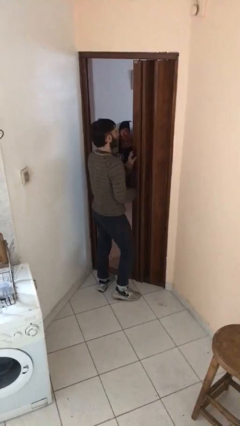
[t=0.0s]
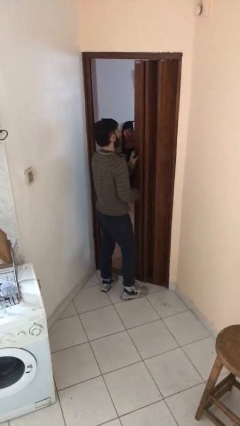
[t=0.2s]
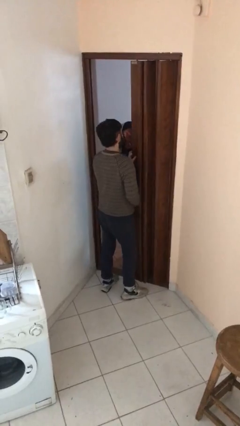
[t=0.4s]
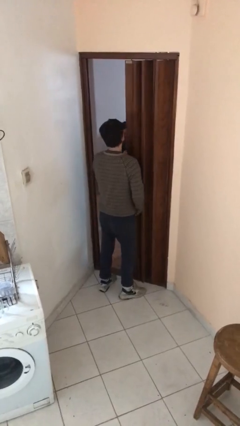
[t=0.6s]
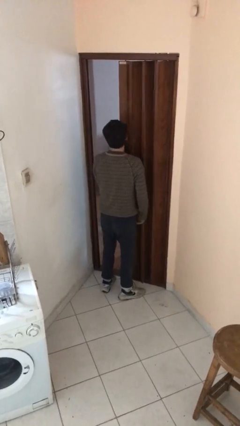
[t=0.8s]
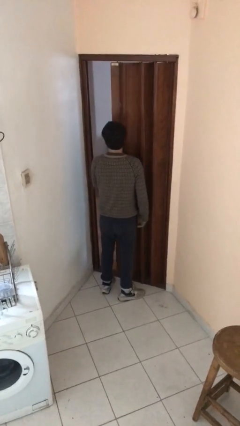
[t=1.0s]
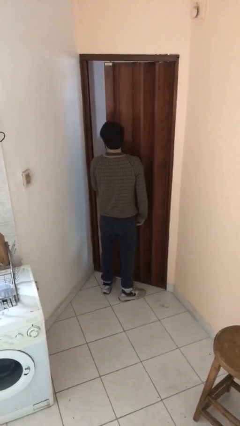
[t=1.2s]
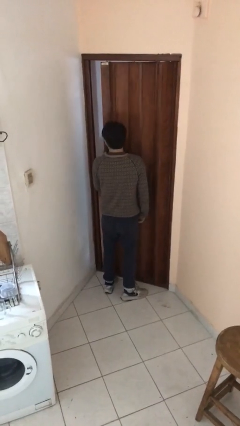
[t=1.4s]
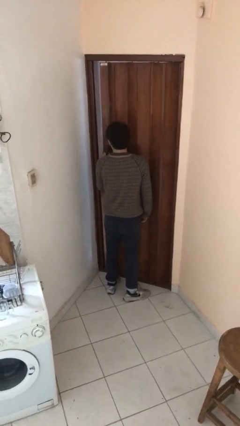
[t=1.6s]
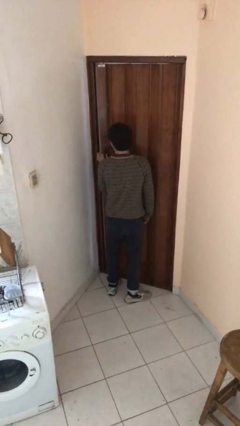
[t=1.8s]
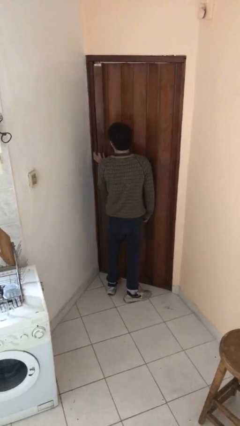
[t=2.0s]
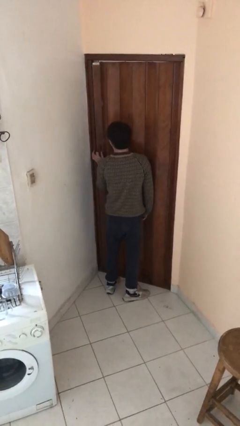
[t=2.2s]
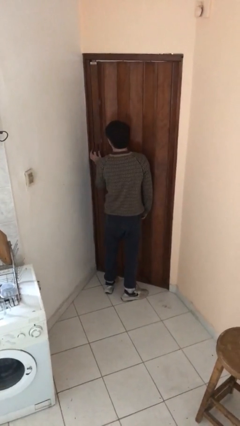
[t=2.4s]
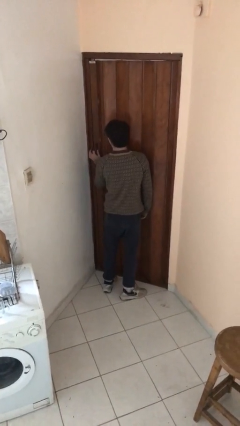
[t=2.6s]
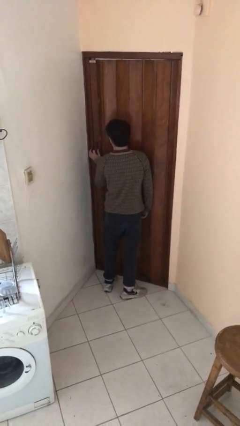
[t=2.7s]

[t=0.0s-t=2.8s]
person closes sliding door

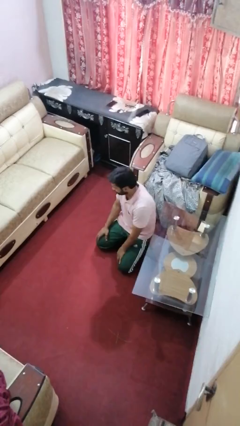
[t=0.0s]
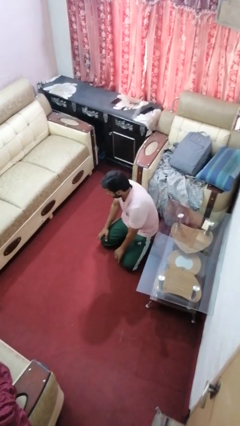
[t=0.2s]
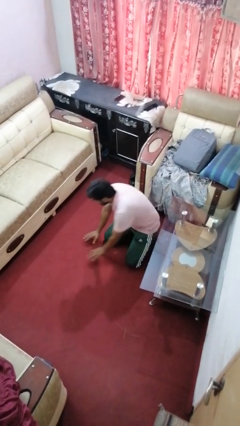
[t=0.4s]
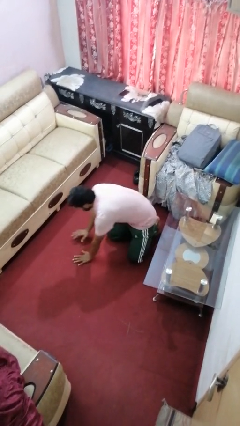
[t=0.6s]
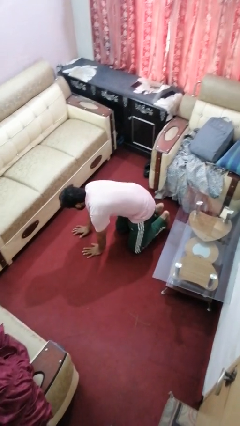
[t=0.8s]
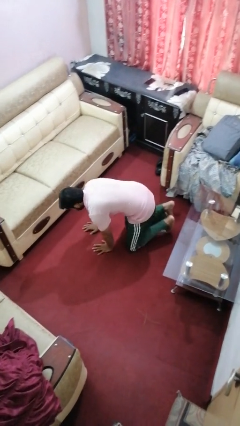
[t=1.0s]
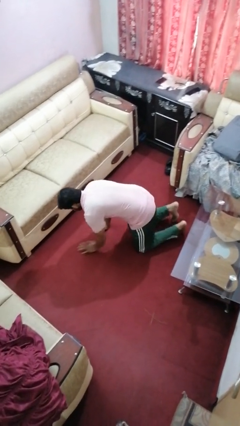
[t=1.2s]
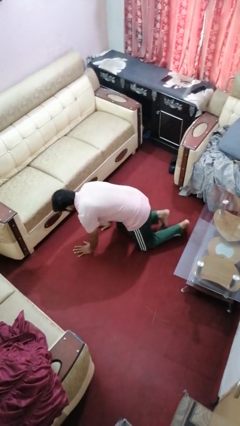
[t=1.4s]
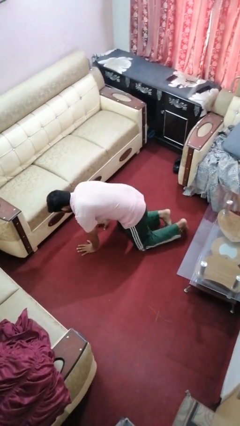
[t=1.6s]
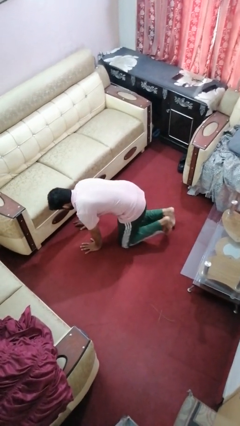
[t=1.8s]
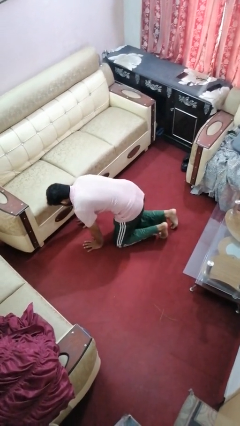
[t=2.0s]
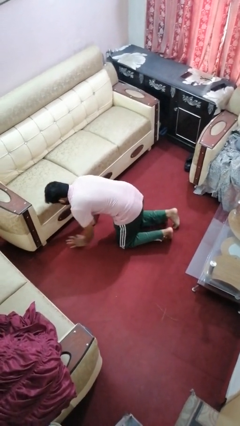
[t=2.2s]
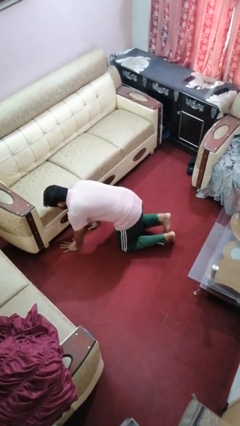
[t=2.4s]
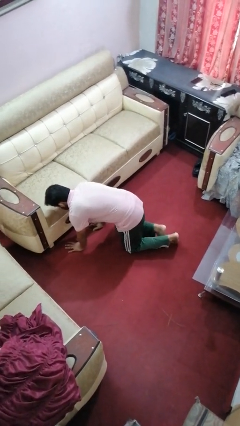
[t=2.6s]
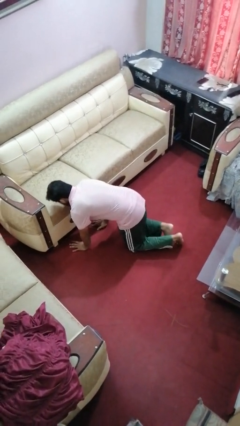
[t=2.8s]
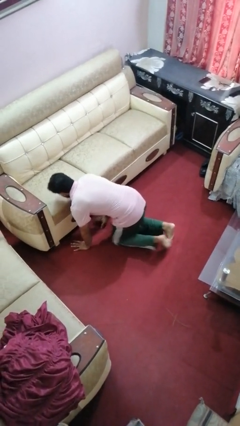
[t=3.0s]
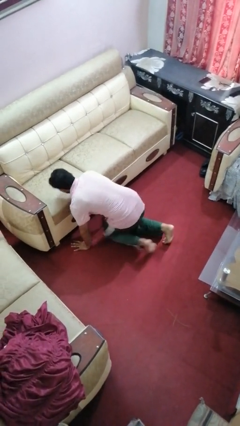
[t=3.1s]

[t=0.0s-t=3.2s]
person crawls

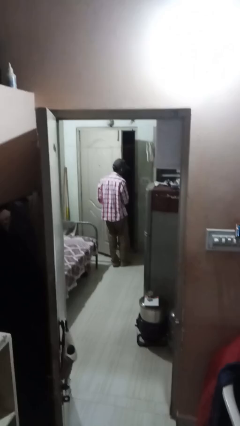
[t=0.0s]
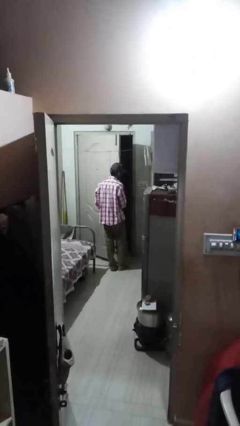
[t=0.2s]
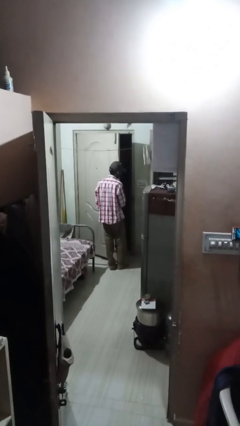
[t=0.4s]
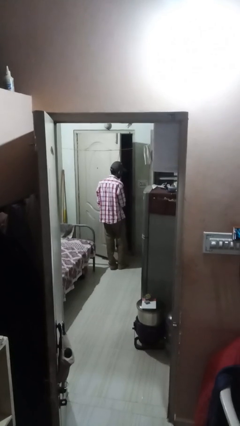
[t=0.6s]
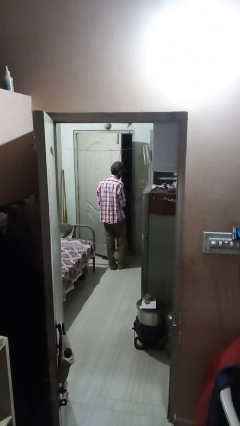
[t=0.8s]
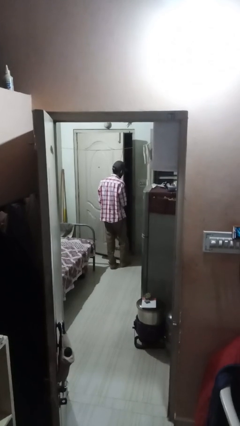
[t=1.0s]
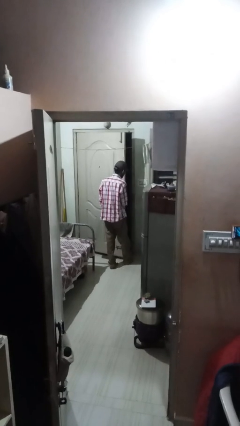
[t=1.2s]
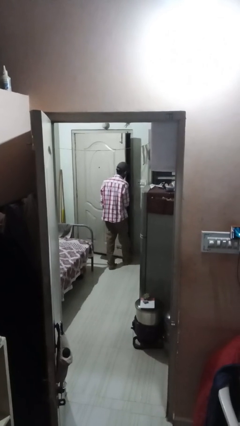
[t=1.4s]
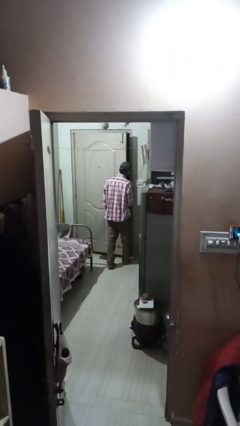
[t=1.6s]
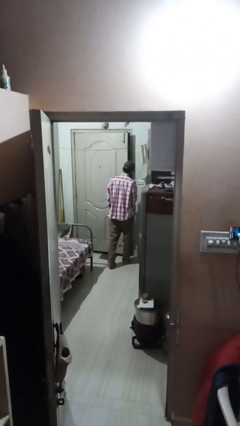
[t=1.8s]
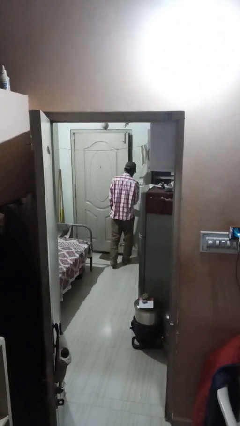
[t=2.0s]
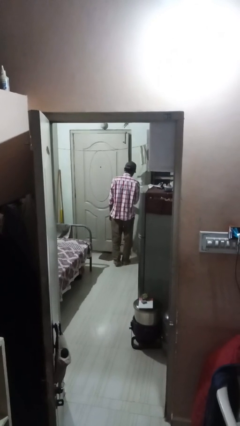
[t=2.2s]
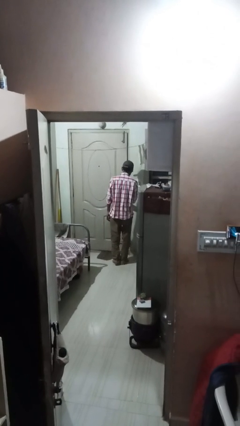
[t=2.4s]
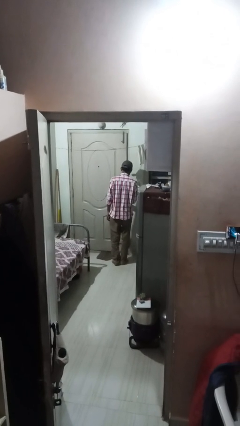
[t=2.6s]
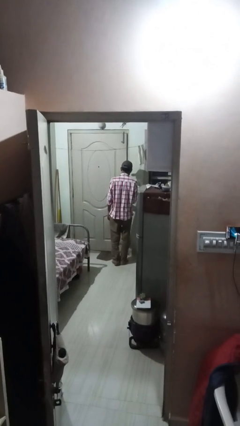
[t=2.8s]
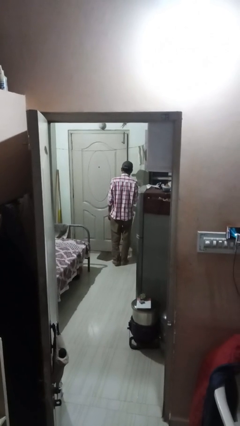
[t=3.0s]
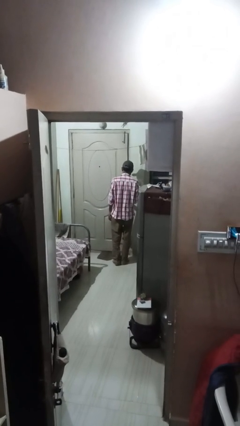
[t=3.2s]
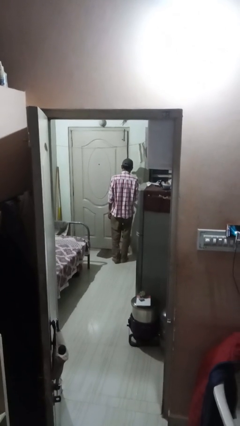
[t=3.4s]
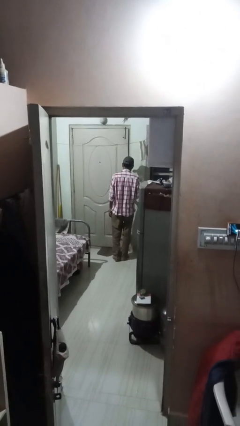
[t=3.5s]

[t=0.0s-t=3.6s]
person closes facility door

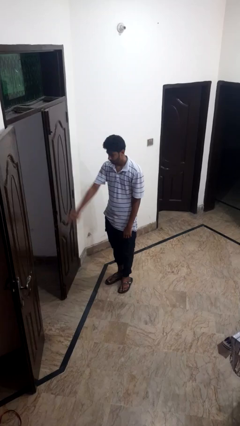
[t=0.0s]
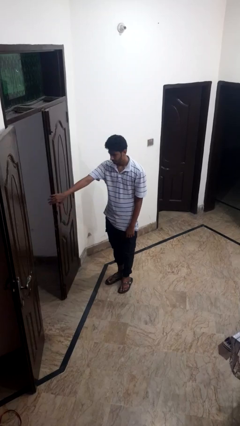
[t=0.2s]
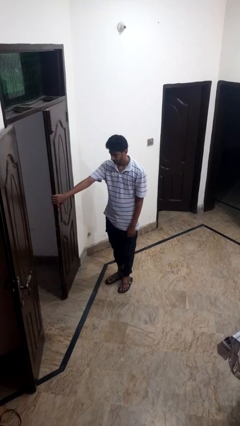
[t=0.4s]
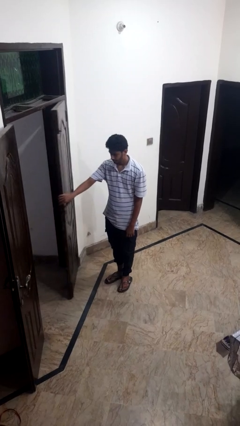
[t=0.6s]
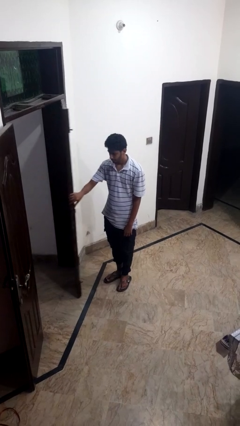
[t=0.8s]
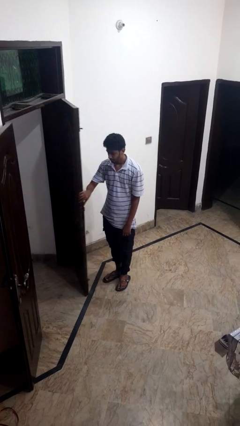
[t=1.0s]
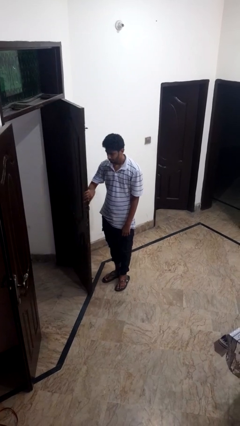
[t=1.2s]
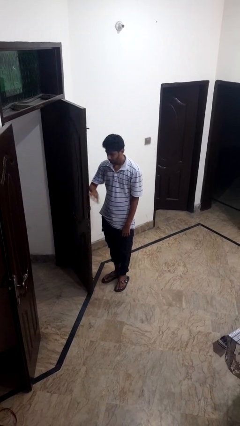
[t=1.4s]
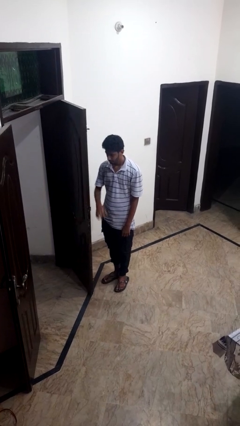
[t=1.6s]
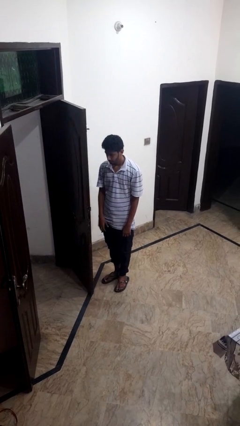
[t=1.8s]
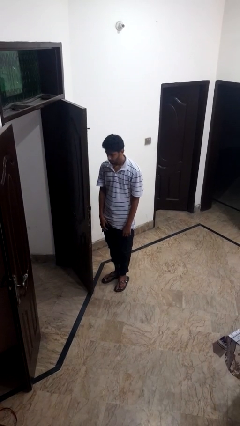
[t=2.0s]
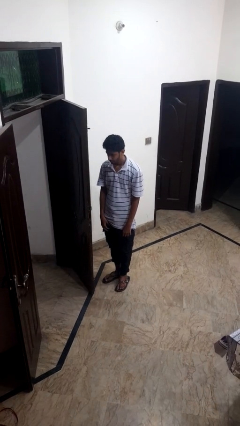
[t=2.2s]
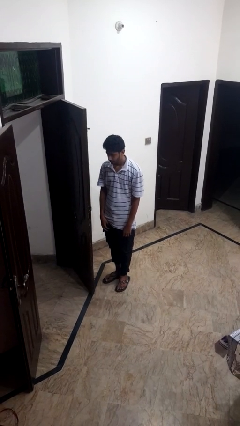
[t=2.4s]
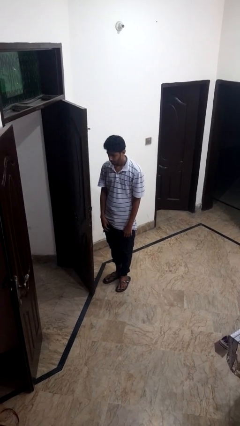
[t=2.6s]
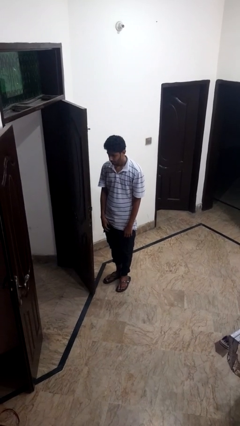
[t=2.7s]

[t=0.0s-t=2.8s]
person opens facility door

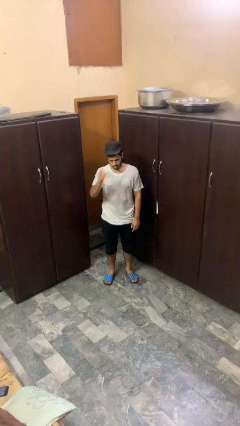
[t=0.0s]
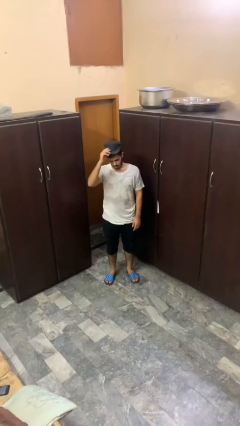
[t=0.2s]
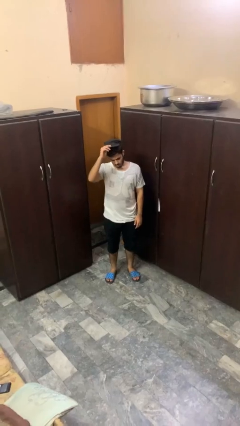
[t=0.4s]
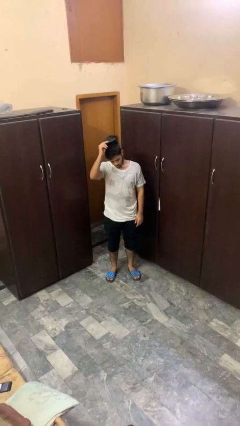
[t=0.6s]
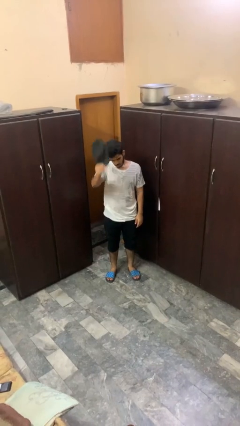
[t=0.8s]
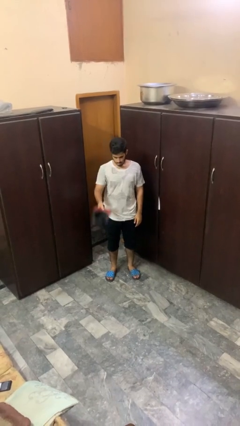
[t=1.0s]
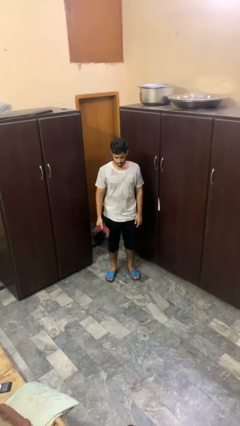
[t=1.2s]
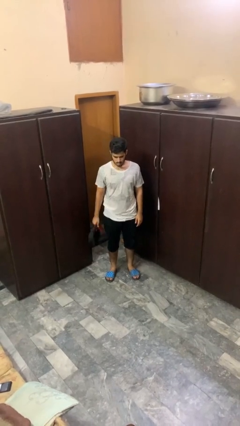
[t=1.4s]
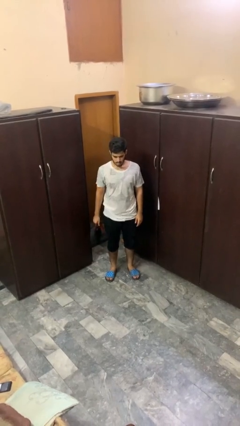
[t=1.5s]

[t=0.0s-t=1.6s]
person takes off hat

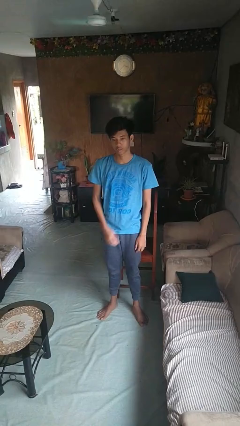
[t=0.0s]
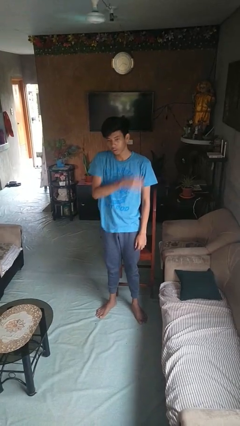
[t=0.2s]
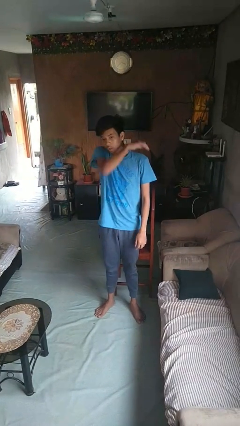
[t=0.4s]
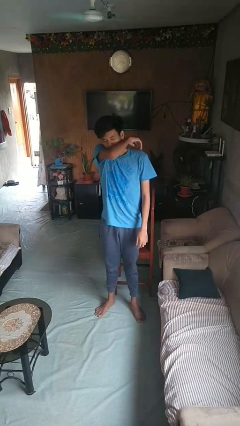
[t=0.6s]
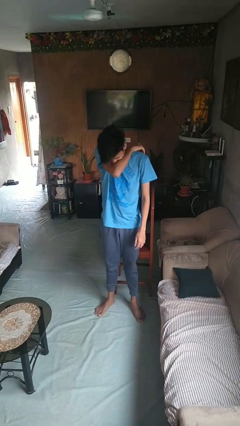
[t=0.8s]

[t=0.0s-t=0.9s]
person sneezes into arm

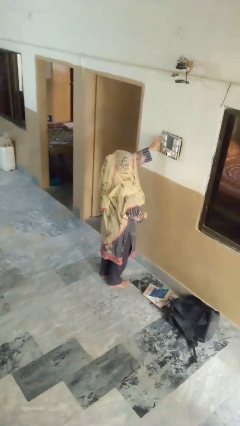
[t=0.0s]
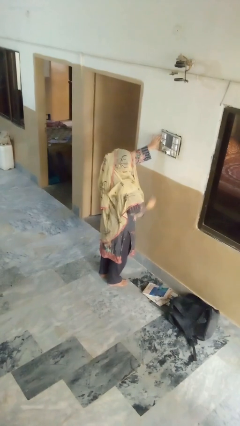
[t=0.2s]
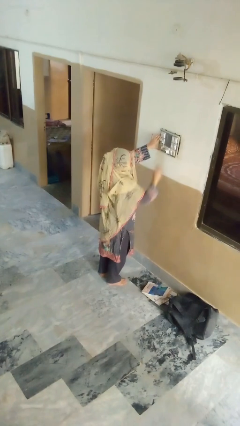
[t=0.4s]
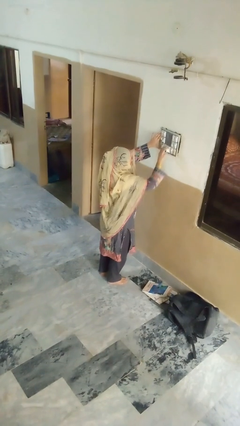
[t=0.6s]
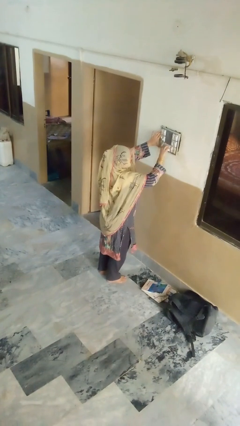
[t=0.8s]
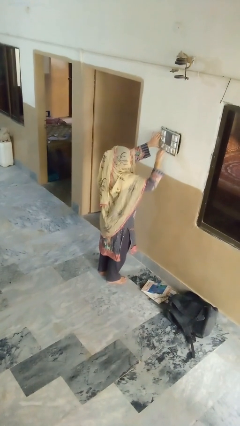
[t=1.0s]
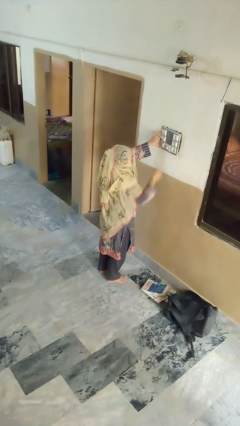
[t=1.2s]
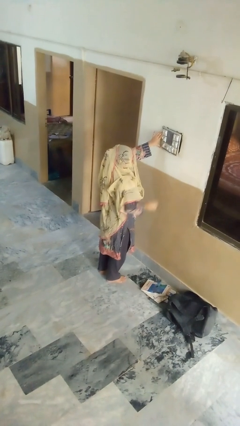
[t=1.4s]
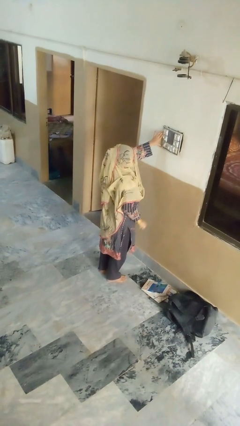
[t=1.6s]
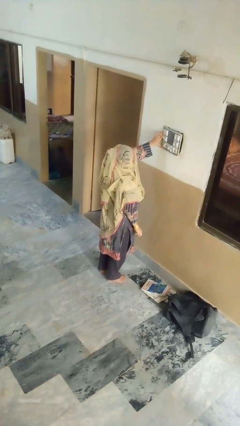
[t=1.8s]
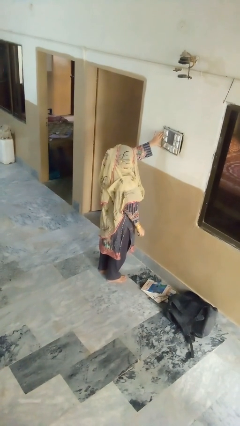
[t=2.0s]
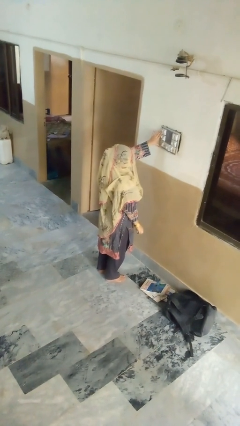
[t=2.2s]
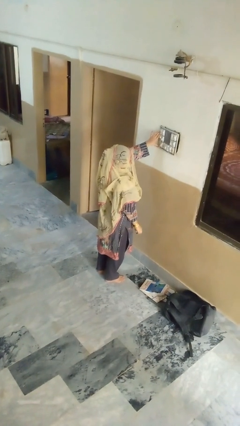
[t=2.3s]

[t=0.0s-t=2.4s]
person unplugs from electrical socket
